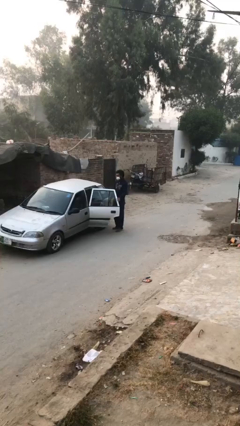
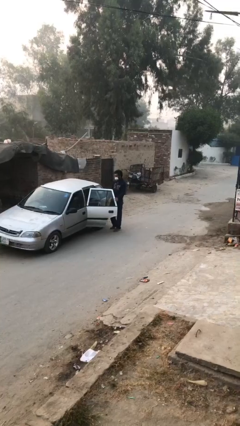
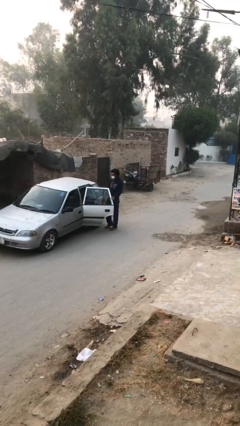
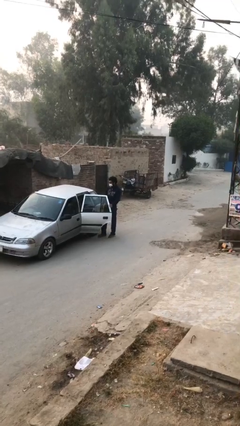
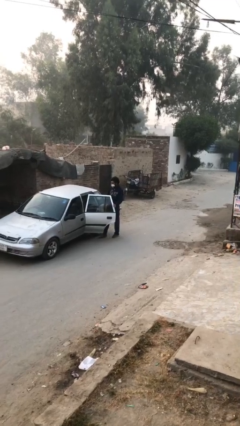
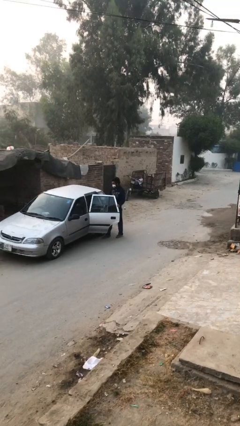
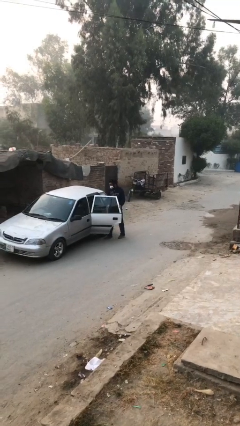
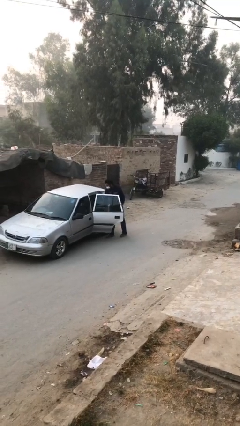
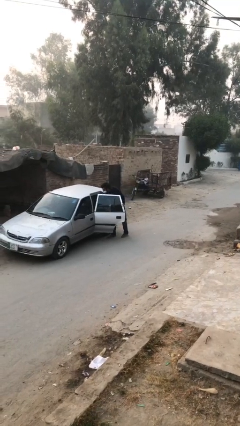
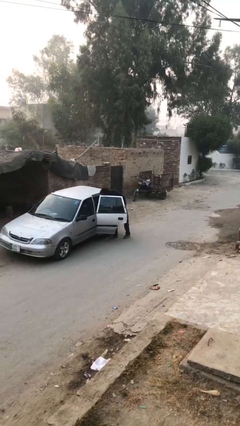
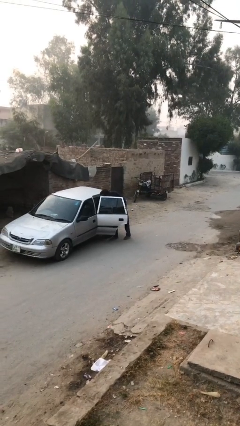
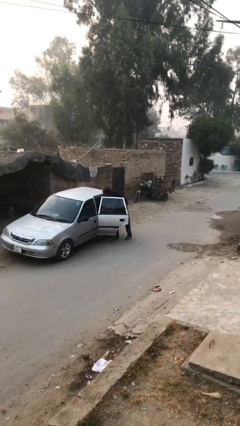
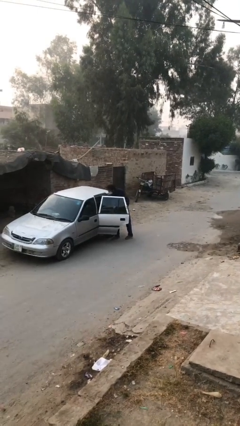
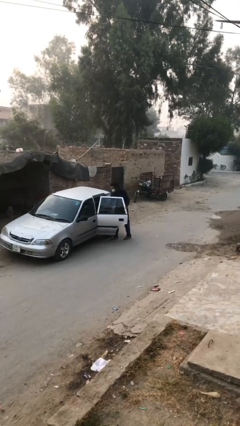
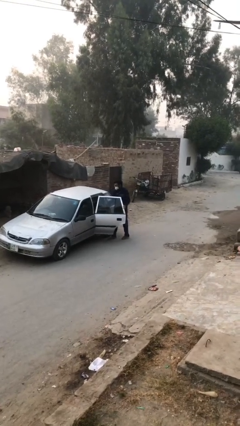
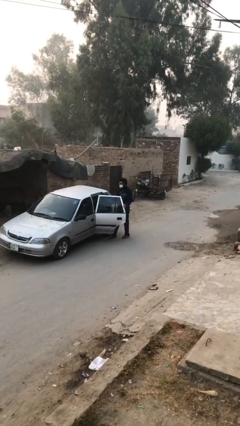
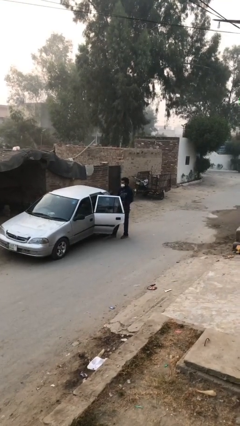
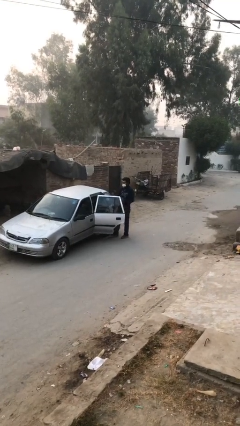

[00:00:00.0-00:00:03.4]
person unloads car

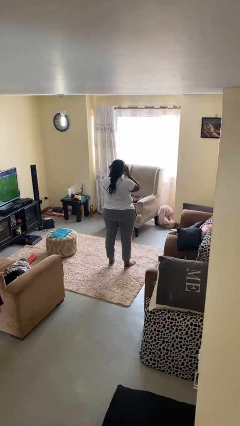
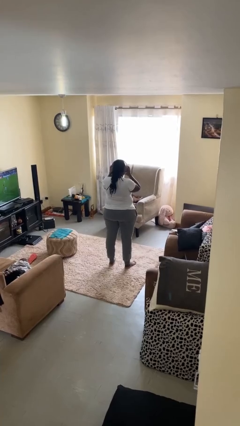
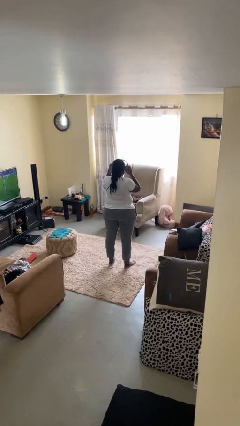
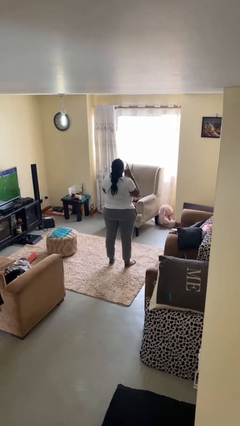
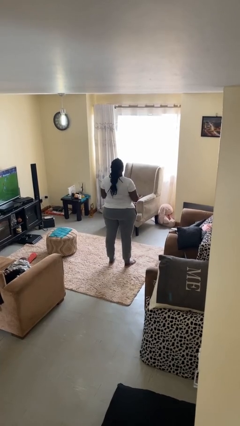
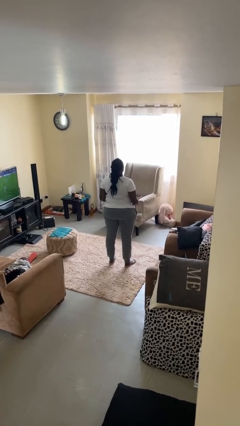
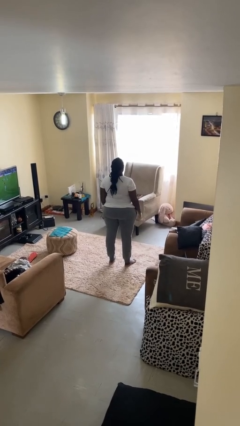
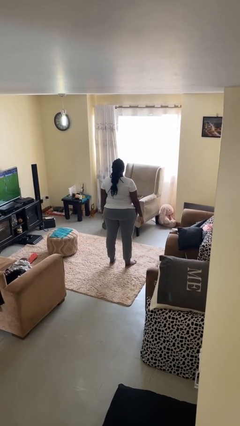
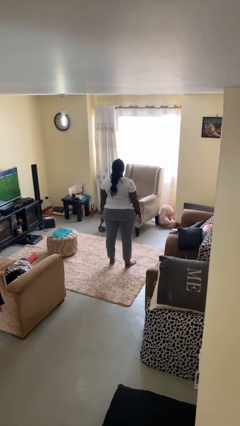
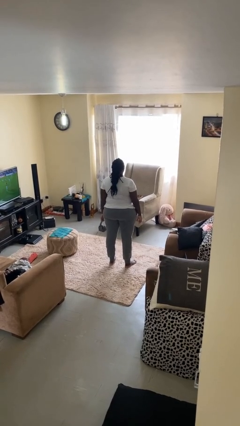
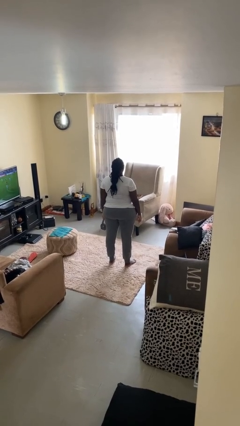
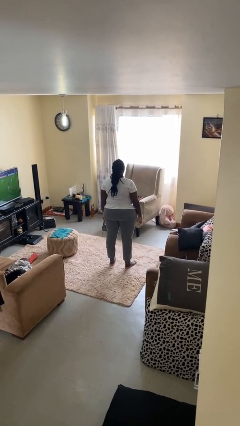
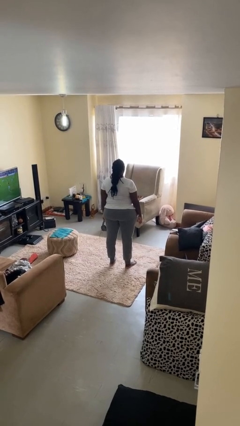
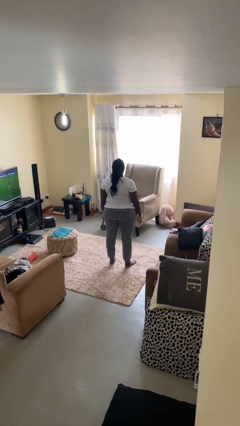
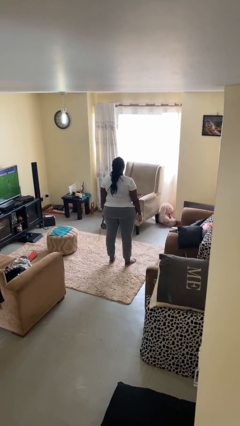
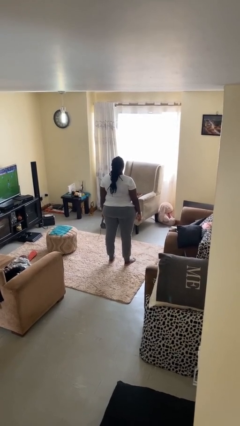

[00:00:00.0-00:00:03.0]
person takes off headphones

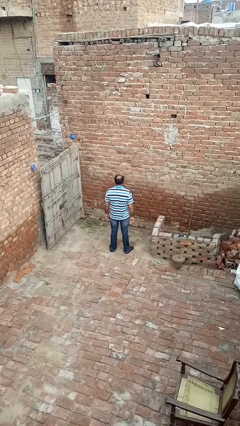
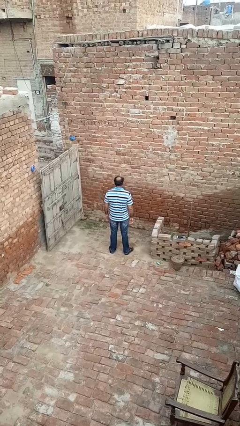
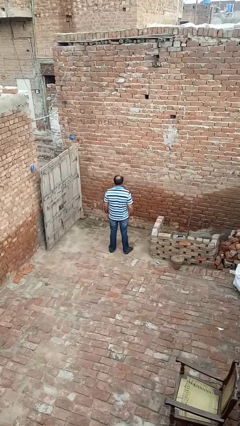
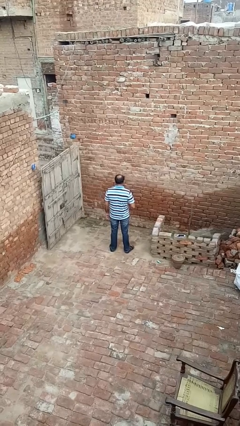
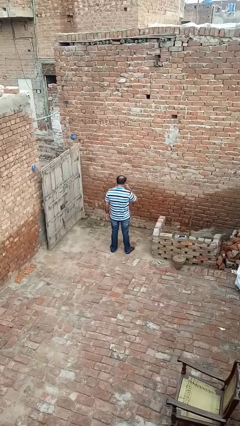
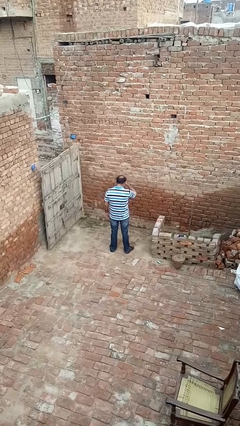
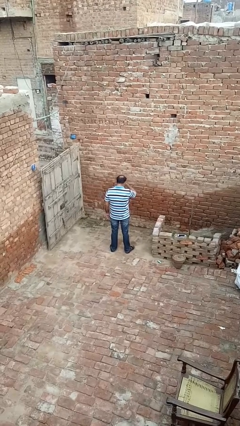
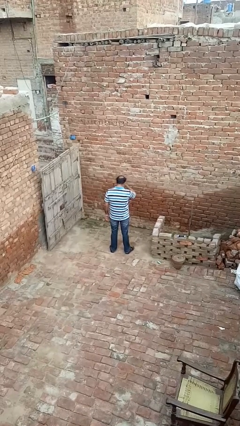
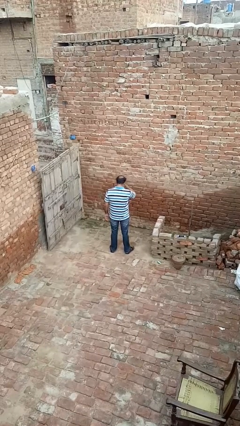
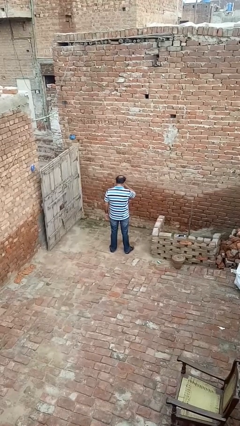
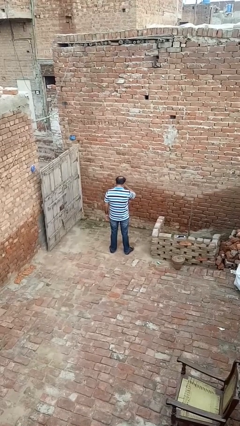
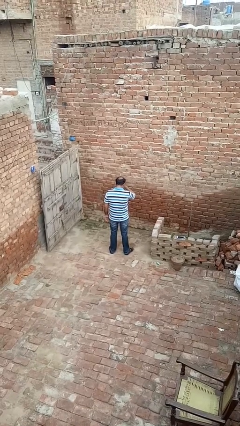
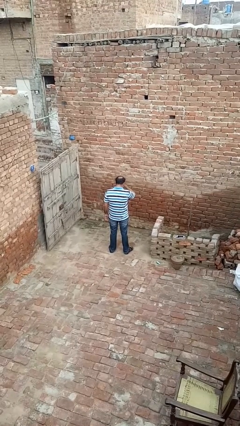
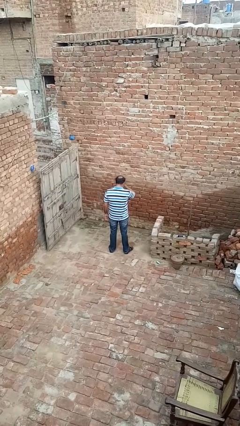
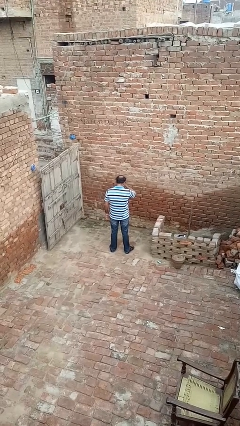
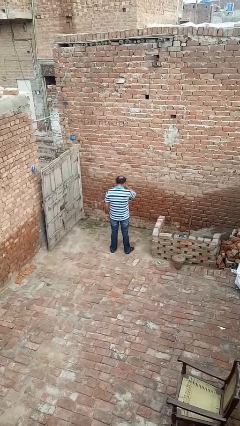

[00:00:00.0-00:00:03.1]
person rubs eyes

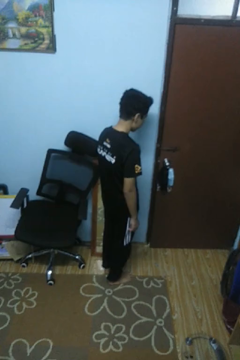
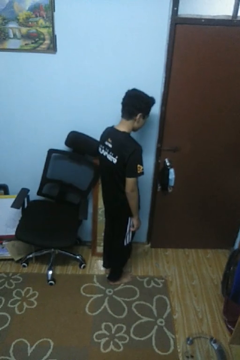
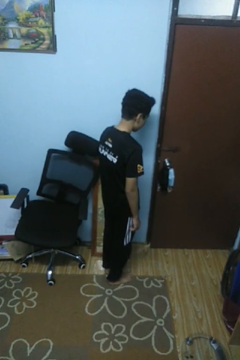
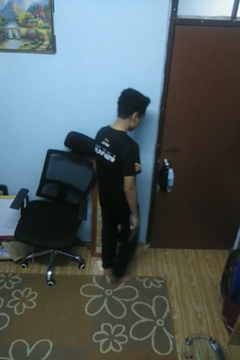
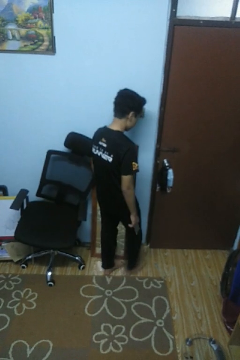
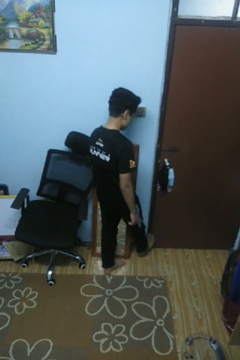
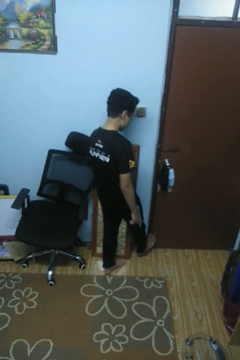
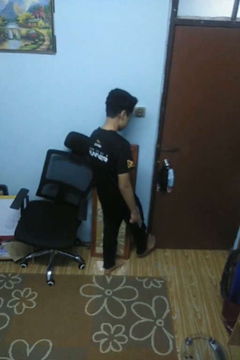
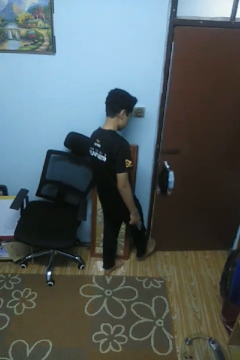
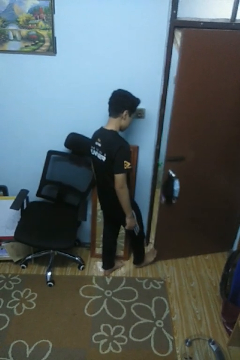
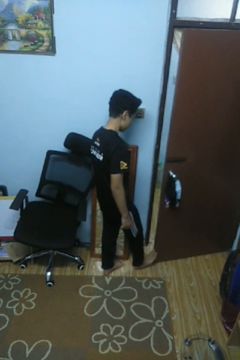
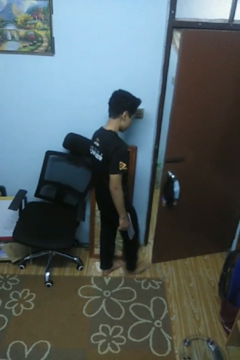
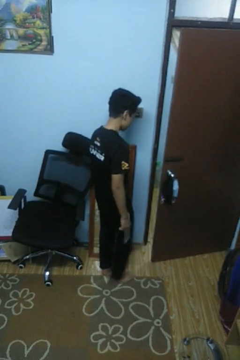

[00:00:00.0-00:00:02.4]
person opens facility door

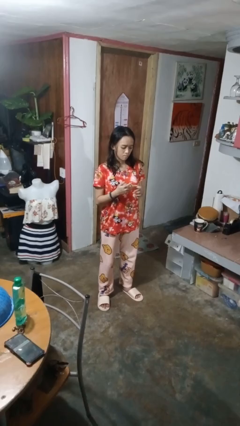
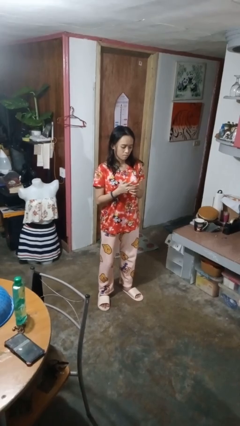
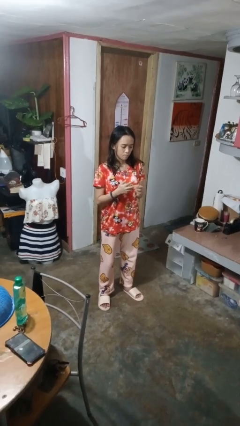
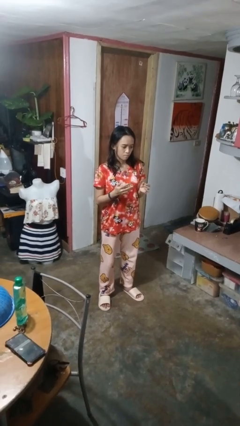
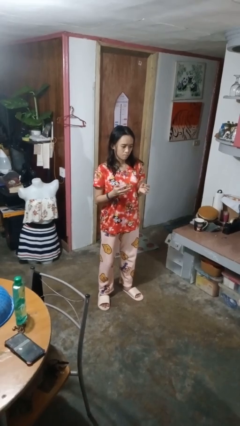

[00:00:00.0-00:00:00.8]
person takes off ring

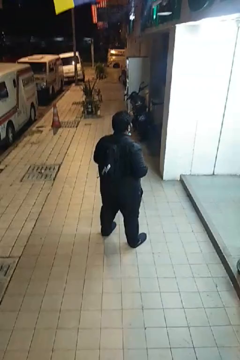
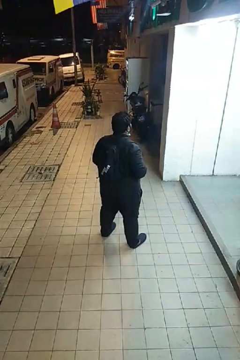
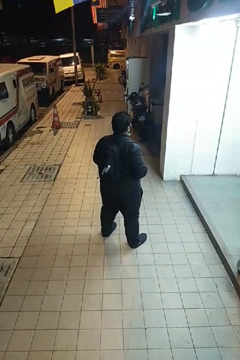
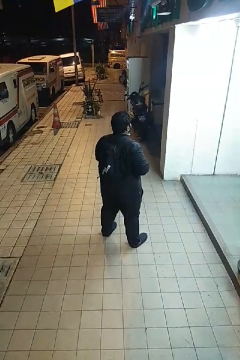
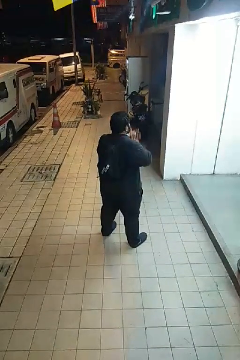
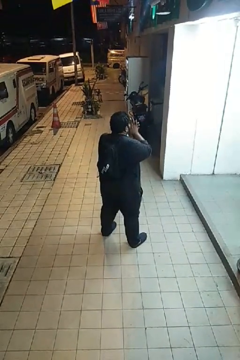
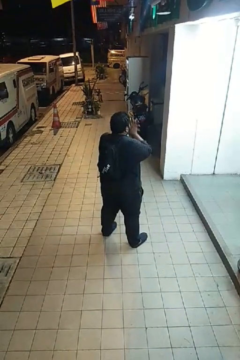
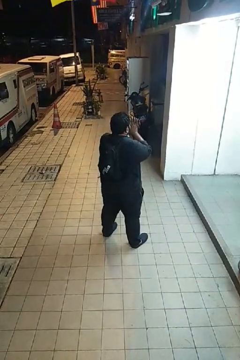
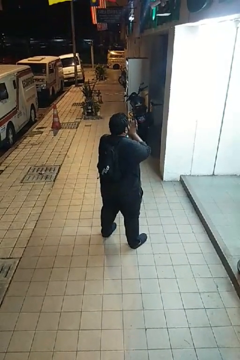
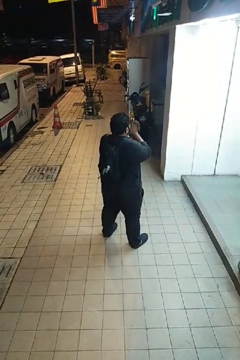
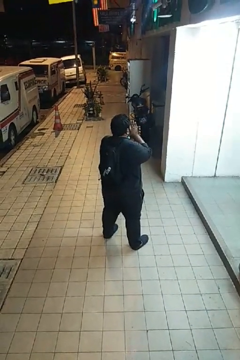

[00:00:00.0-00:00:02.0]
person blows into hands

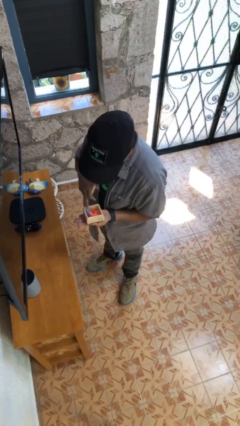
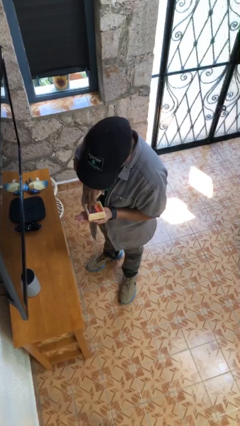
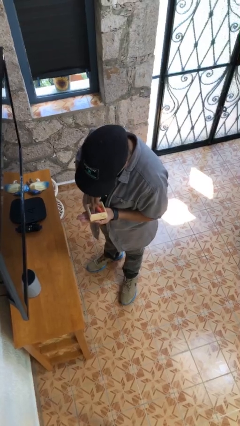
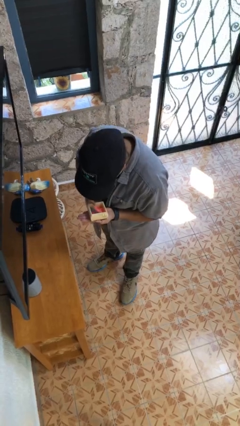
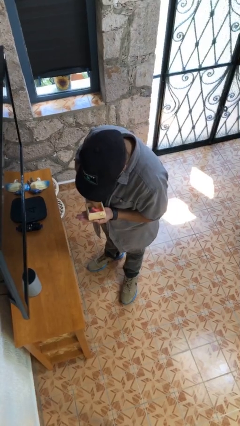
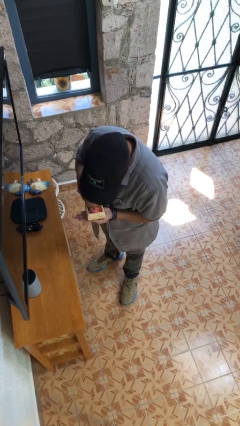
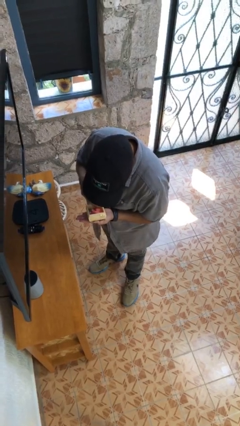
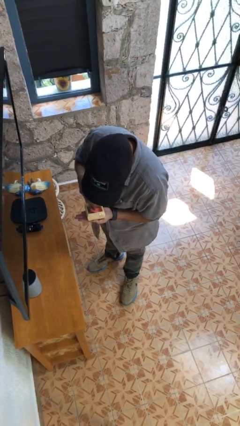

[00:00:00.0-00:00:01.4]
person searches jewelry box

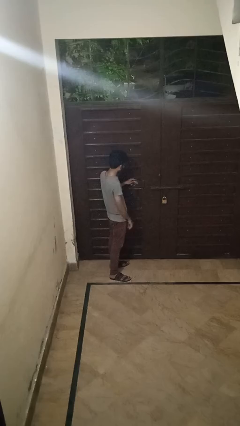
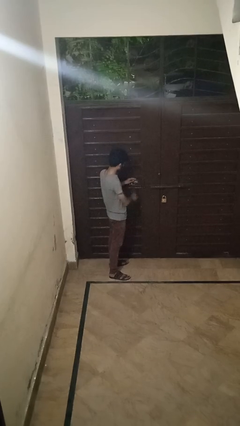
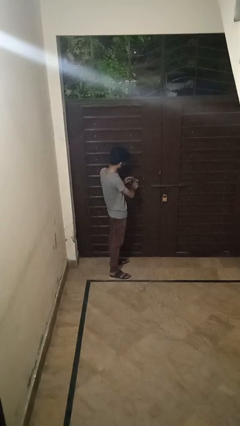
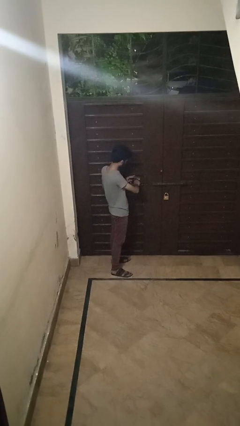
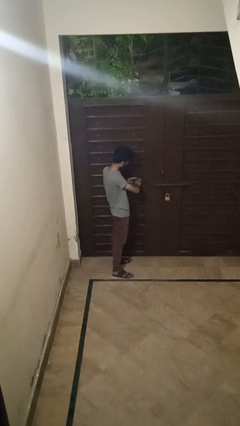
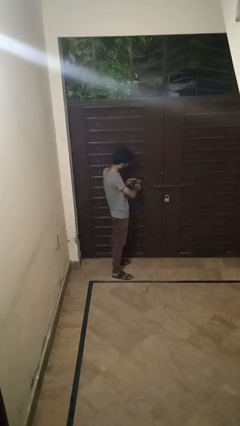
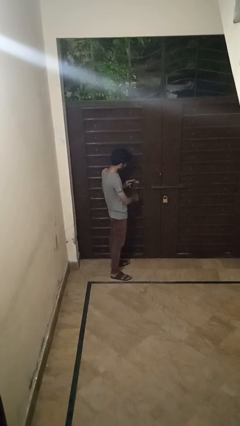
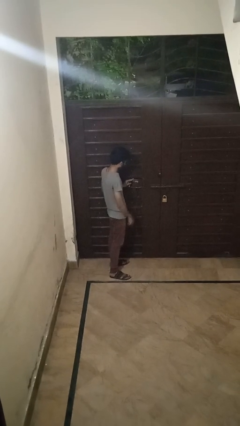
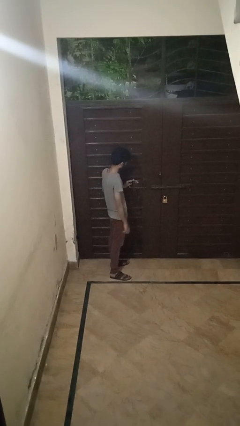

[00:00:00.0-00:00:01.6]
person locks door with keys

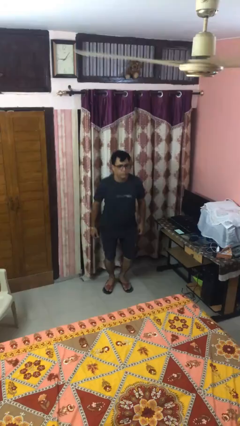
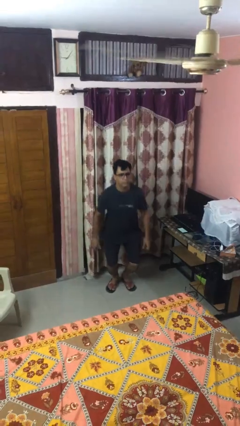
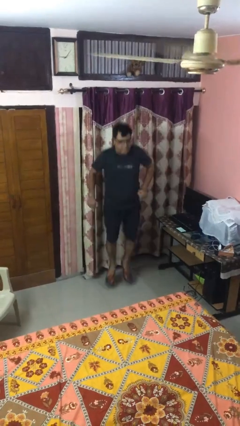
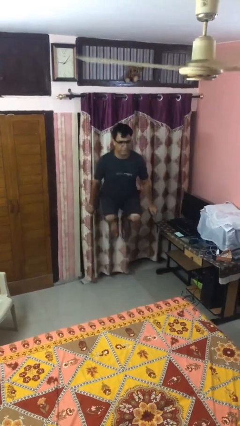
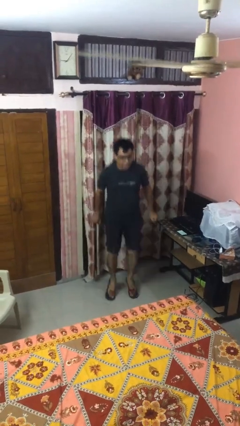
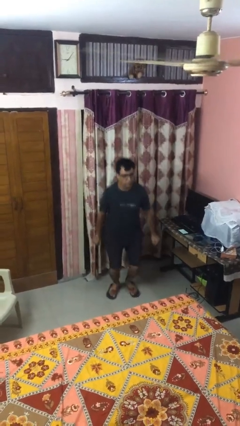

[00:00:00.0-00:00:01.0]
person jumps
